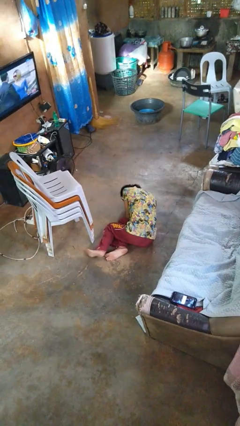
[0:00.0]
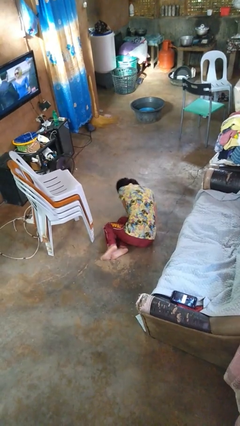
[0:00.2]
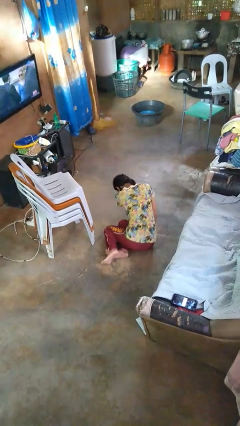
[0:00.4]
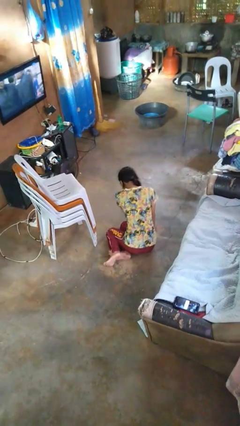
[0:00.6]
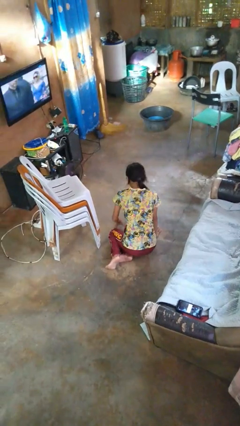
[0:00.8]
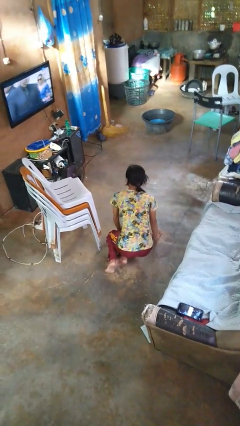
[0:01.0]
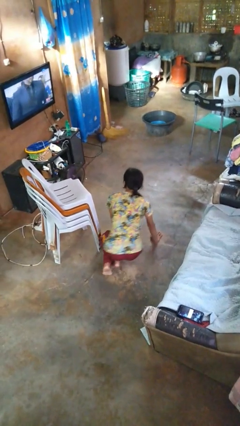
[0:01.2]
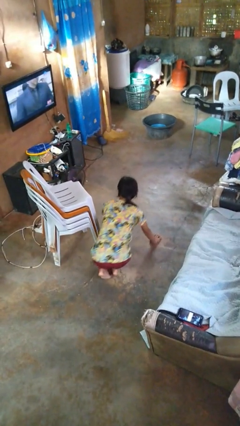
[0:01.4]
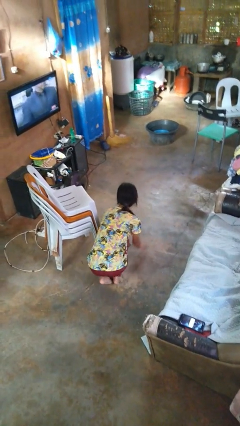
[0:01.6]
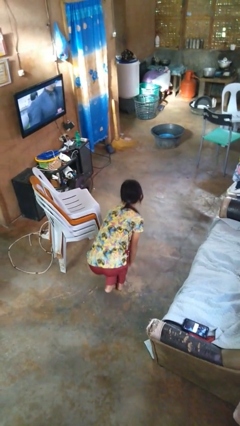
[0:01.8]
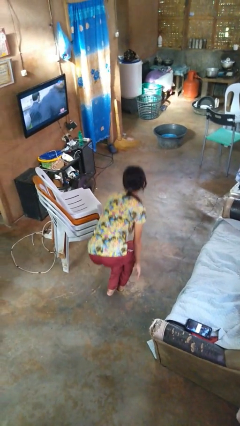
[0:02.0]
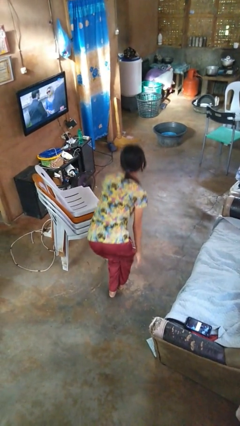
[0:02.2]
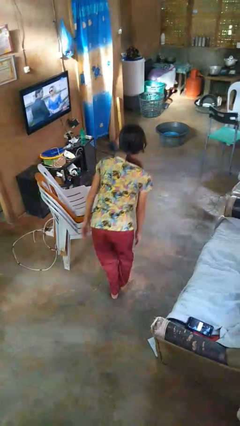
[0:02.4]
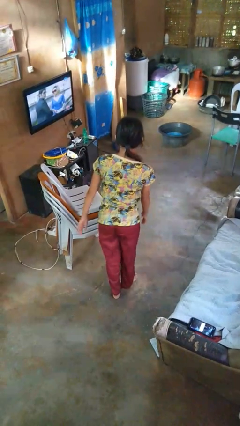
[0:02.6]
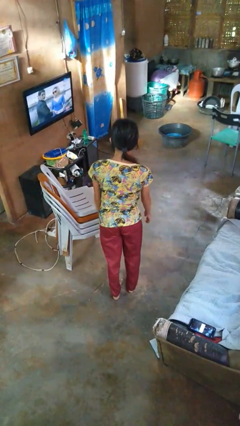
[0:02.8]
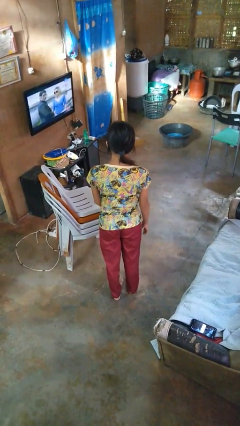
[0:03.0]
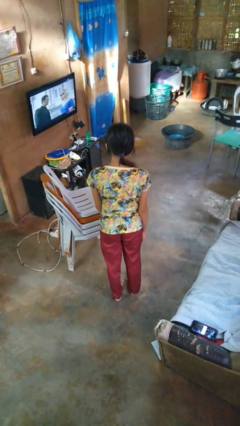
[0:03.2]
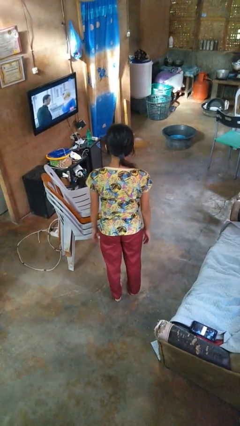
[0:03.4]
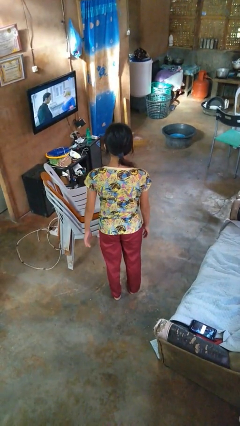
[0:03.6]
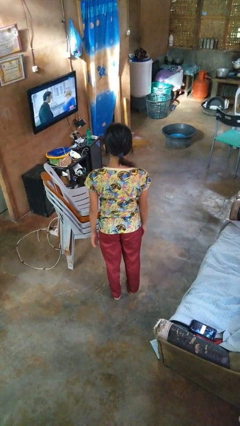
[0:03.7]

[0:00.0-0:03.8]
person stands up from floor

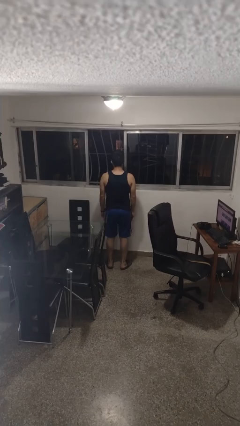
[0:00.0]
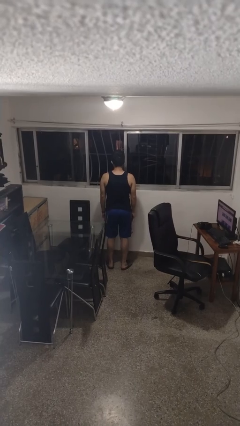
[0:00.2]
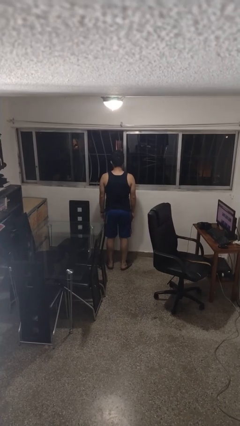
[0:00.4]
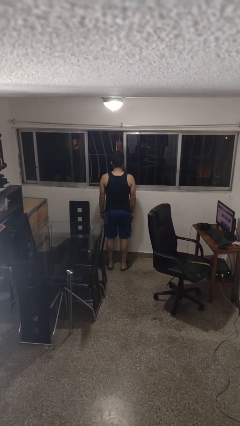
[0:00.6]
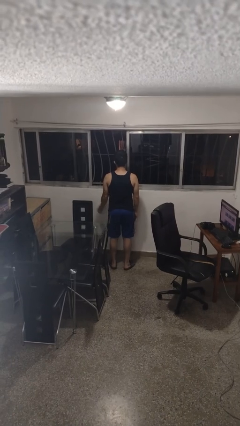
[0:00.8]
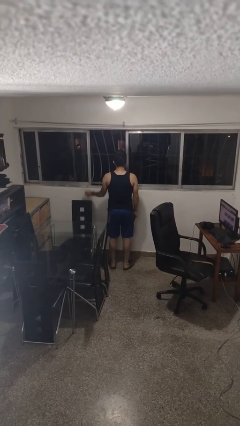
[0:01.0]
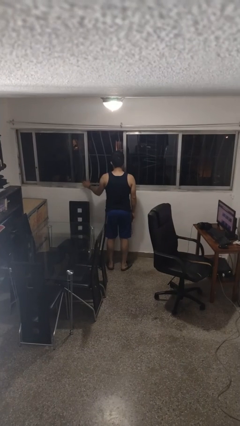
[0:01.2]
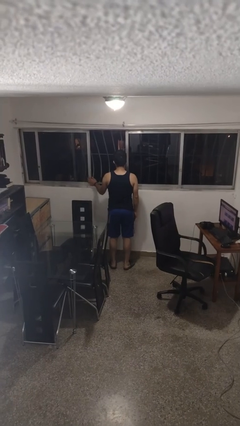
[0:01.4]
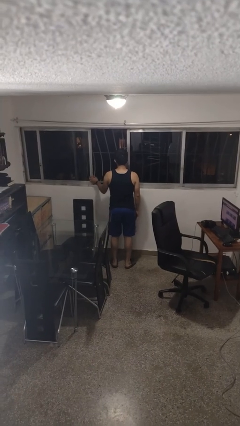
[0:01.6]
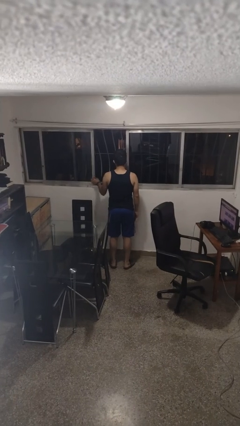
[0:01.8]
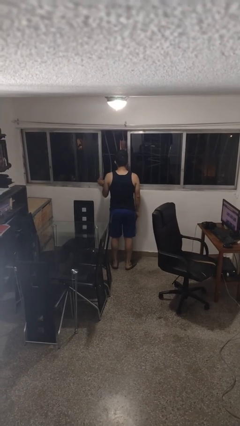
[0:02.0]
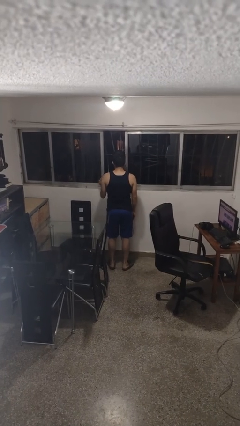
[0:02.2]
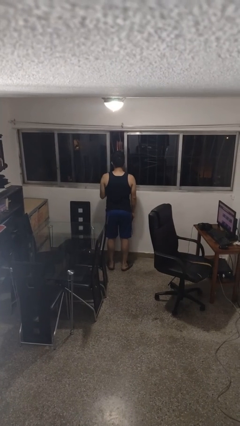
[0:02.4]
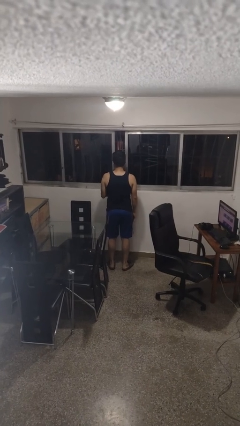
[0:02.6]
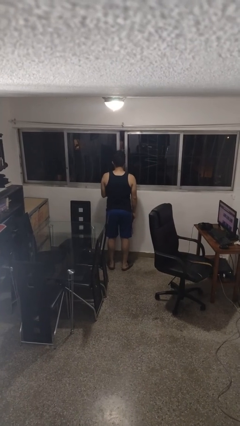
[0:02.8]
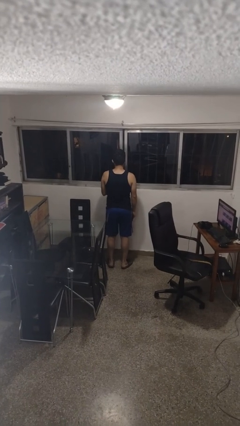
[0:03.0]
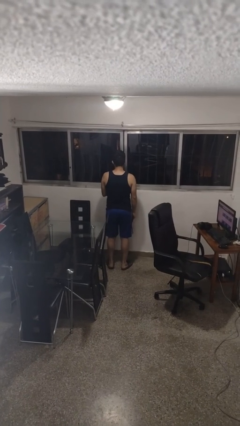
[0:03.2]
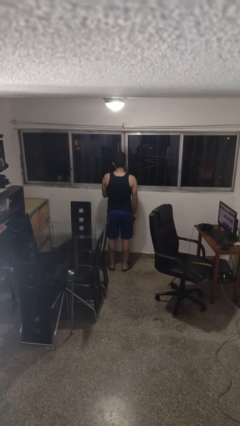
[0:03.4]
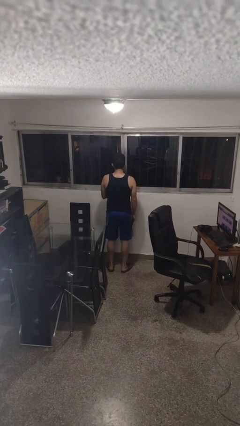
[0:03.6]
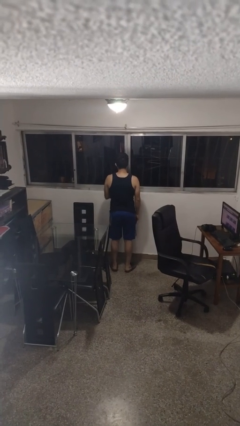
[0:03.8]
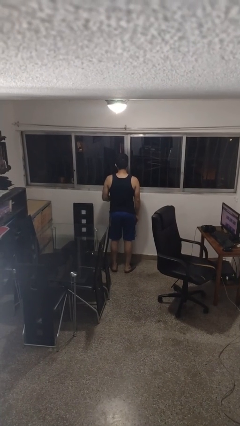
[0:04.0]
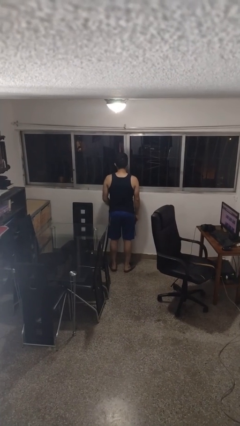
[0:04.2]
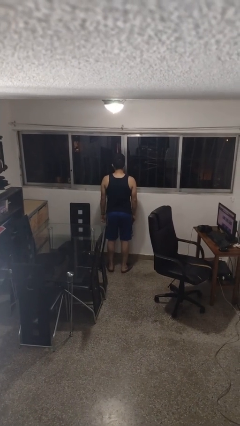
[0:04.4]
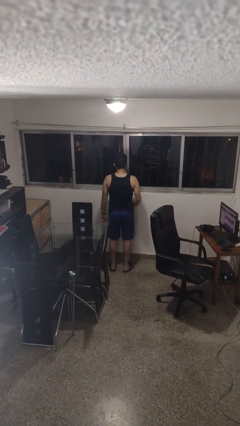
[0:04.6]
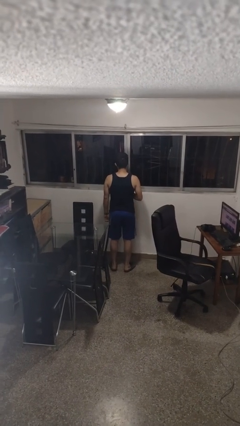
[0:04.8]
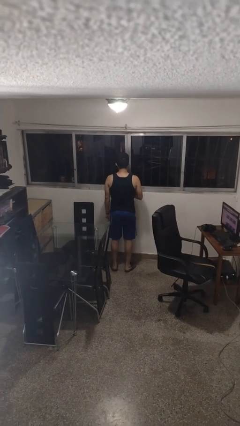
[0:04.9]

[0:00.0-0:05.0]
person closes home window

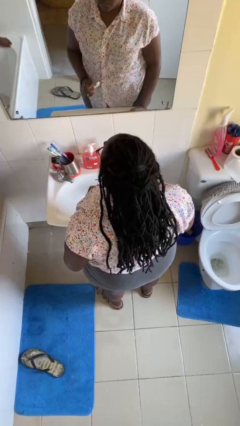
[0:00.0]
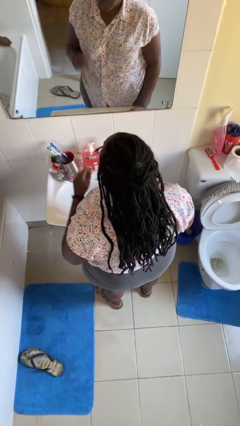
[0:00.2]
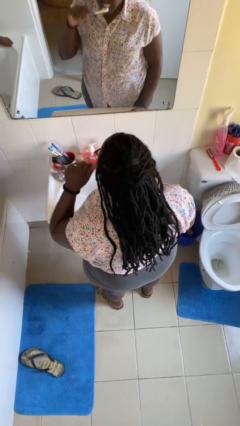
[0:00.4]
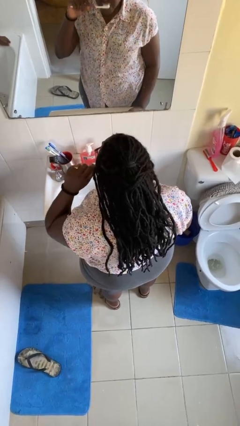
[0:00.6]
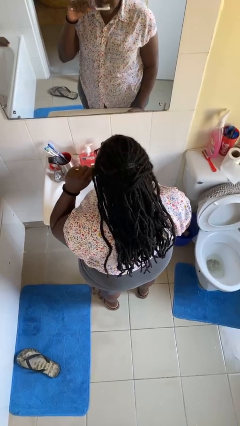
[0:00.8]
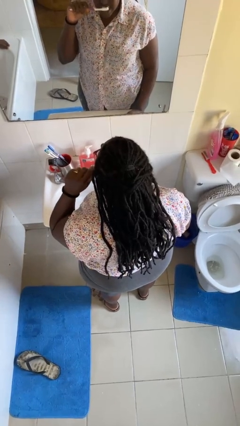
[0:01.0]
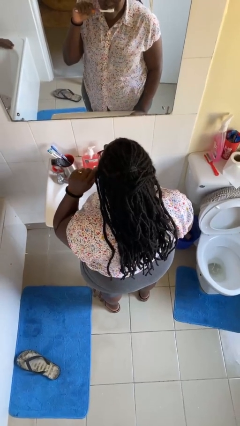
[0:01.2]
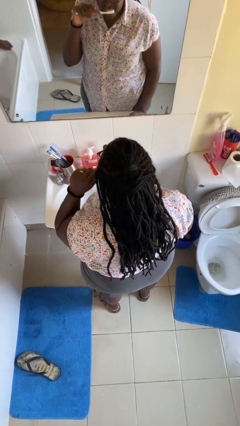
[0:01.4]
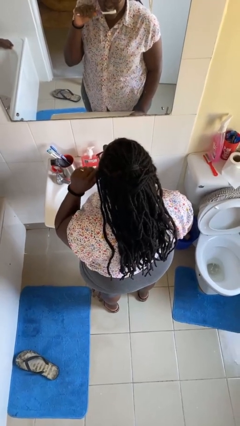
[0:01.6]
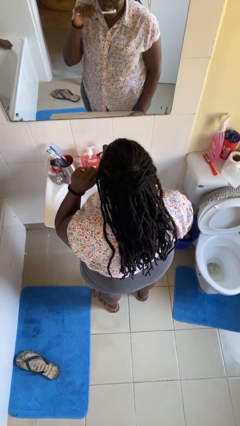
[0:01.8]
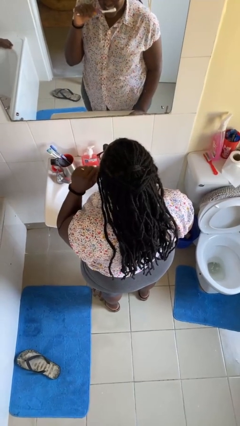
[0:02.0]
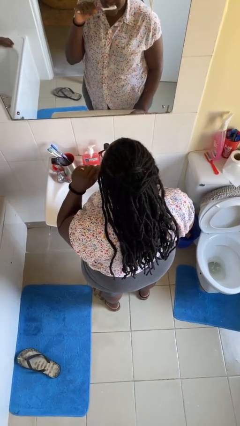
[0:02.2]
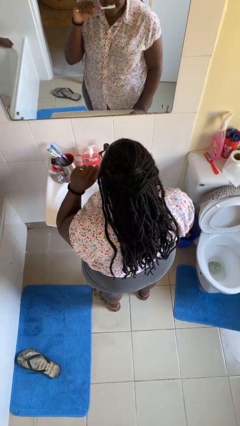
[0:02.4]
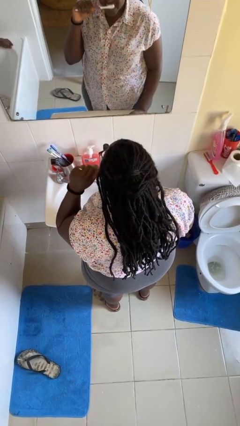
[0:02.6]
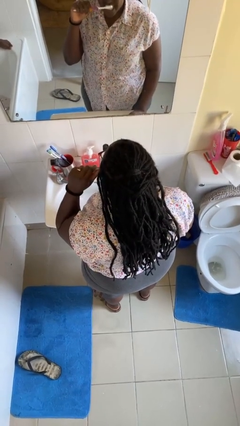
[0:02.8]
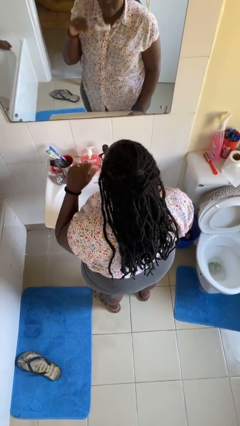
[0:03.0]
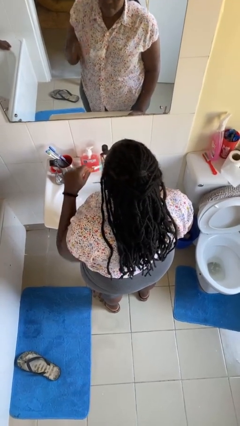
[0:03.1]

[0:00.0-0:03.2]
person brushes teeth

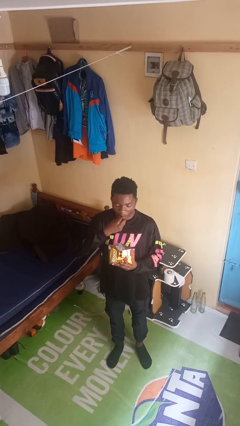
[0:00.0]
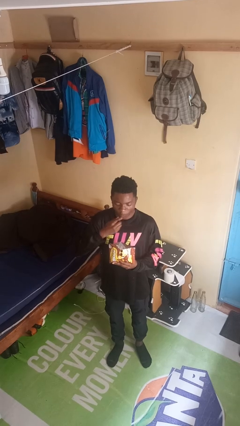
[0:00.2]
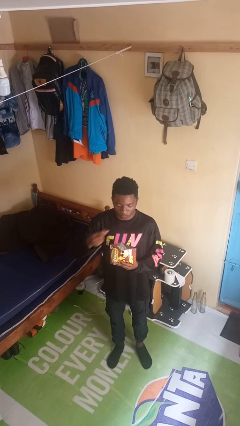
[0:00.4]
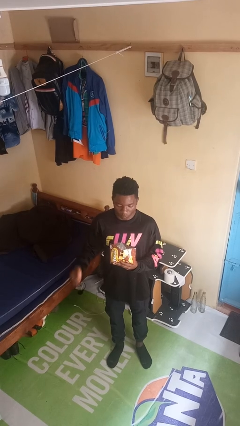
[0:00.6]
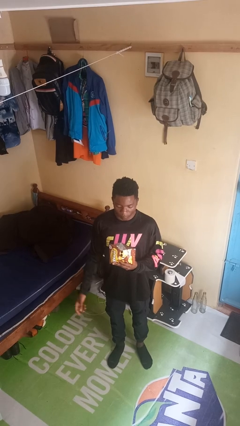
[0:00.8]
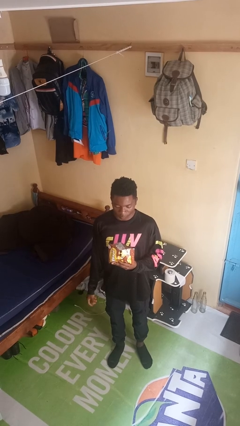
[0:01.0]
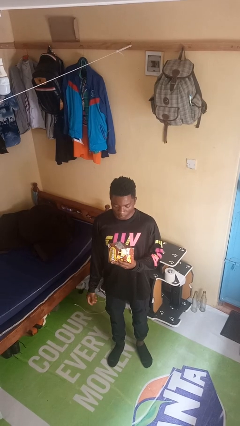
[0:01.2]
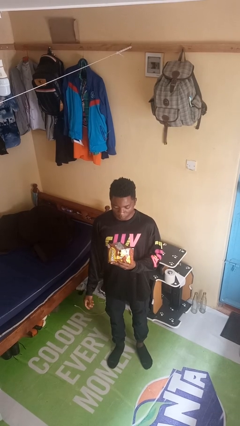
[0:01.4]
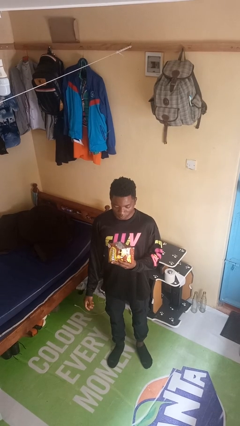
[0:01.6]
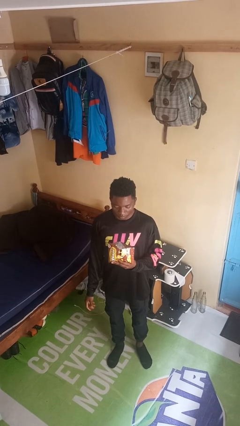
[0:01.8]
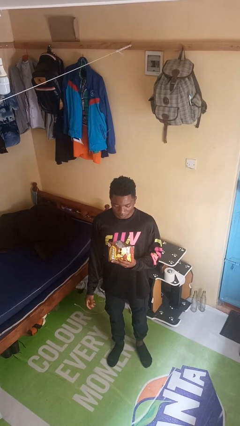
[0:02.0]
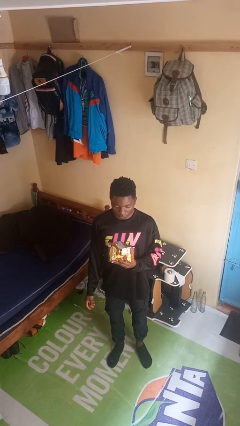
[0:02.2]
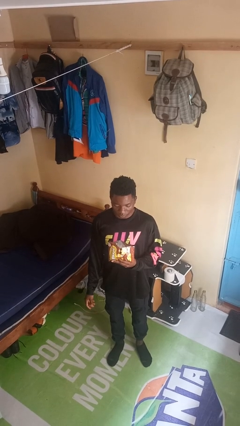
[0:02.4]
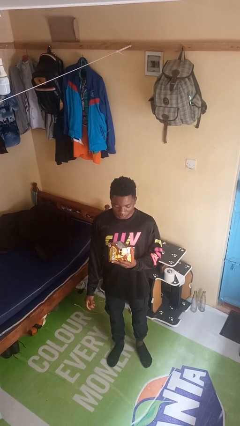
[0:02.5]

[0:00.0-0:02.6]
person eats snack from bag

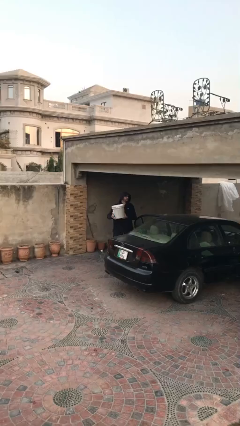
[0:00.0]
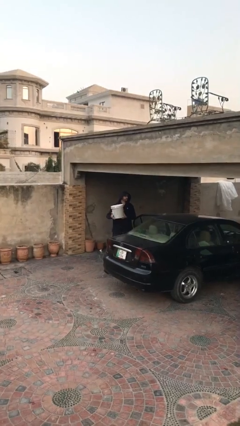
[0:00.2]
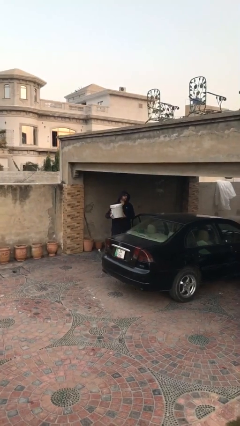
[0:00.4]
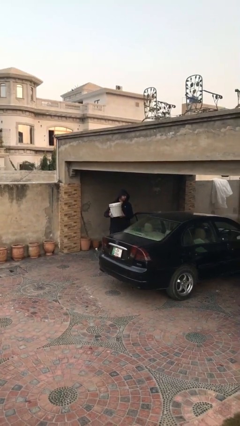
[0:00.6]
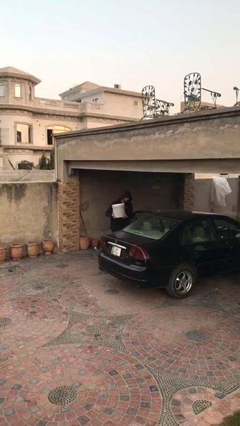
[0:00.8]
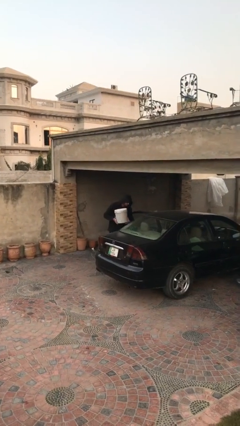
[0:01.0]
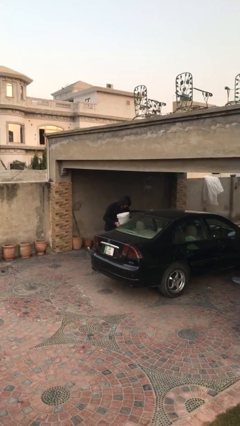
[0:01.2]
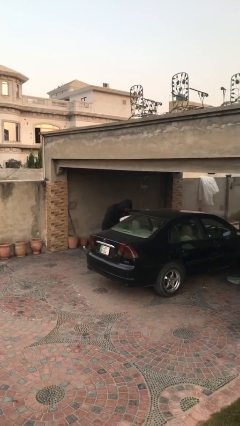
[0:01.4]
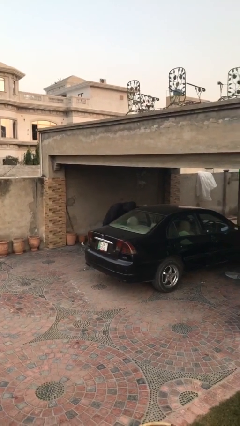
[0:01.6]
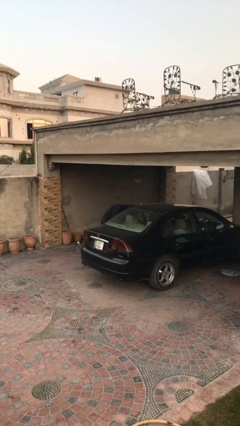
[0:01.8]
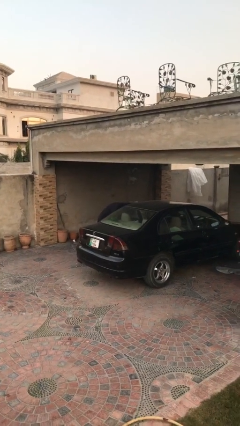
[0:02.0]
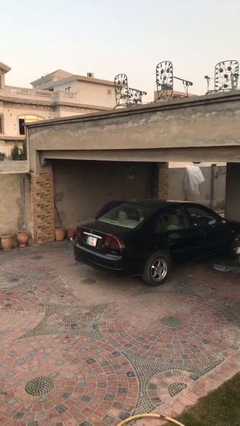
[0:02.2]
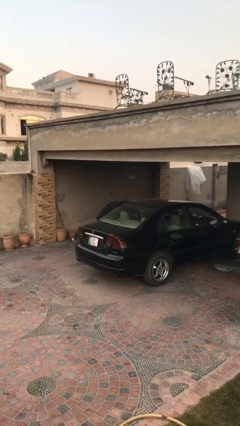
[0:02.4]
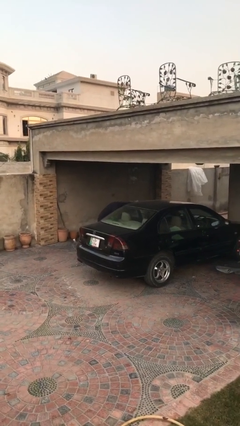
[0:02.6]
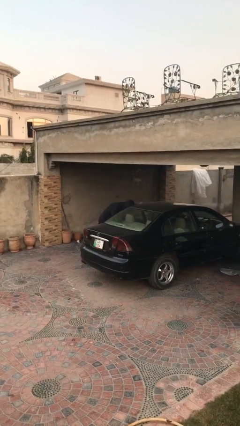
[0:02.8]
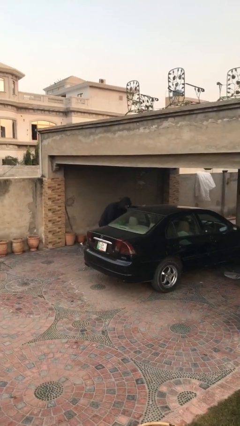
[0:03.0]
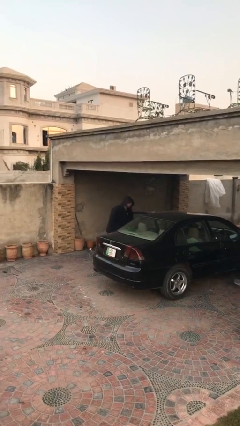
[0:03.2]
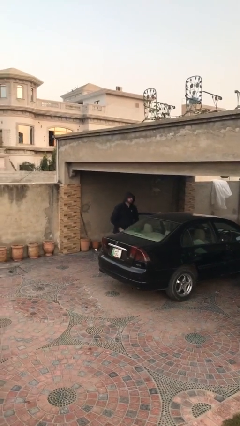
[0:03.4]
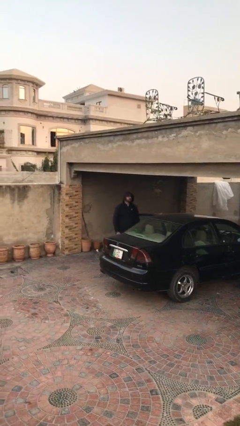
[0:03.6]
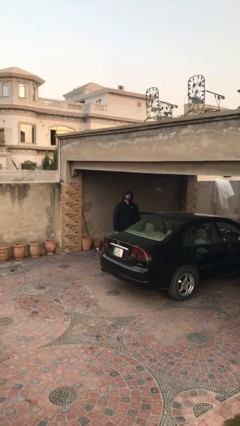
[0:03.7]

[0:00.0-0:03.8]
person loads car
